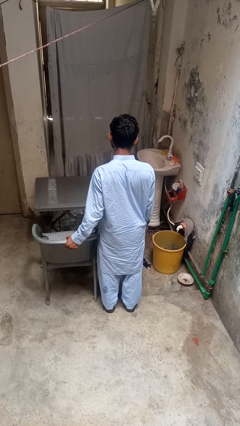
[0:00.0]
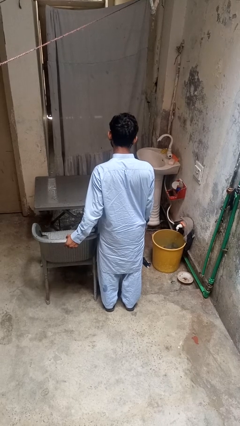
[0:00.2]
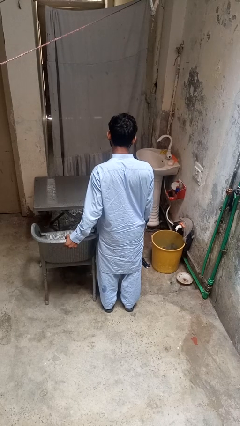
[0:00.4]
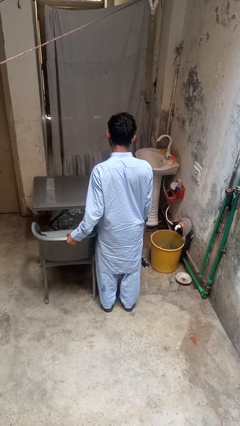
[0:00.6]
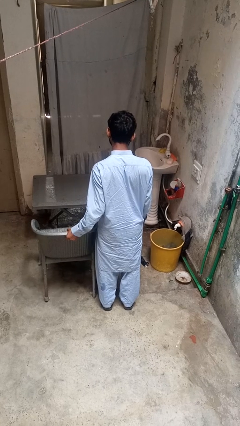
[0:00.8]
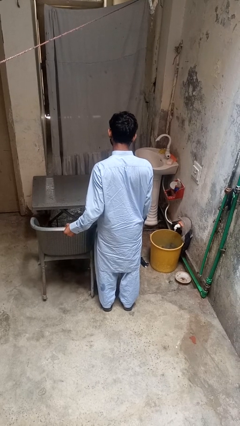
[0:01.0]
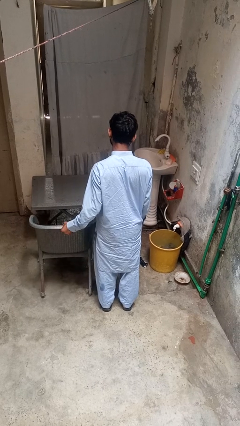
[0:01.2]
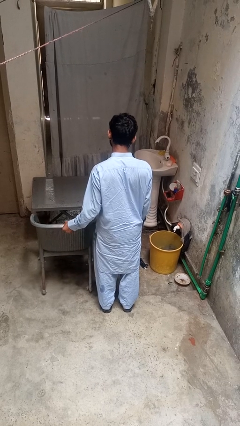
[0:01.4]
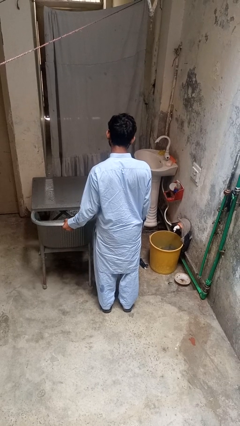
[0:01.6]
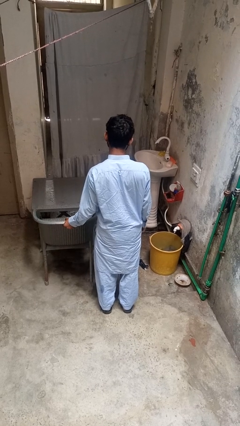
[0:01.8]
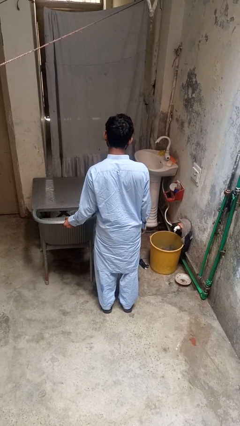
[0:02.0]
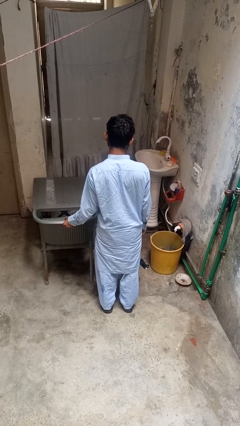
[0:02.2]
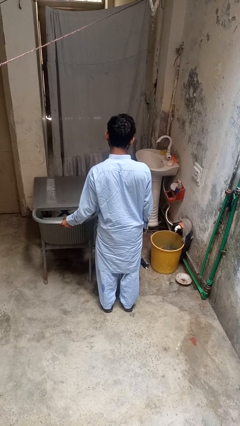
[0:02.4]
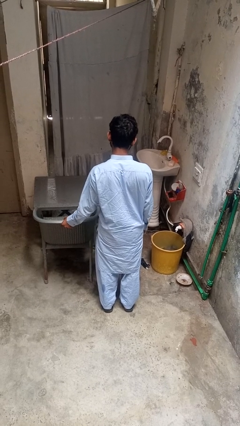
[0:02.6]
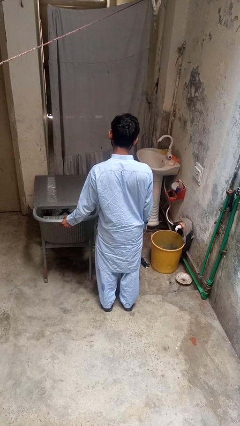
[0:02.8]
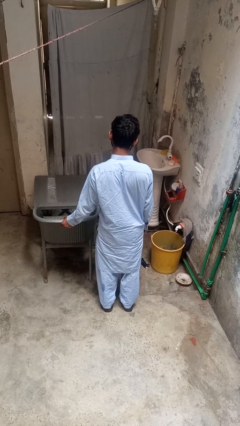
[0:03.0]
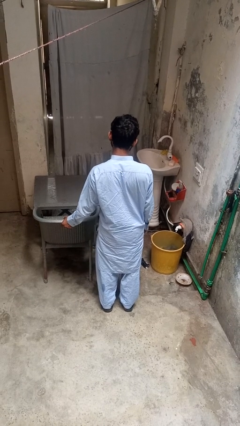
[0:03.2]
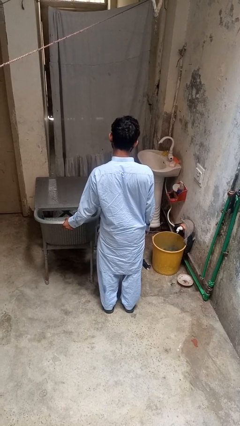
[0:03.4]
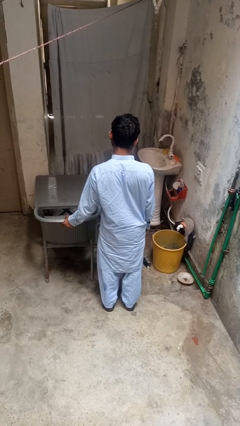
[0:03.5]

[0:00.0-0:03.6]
person pushes in chair

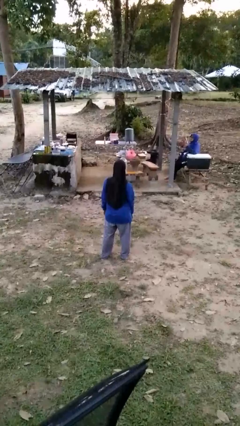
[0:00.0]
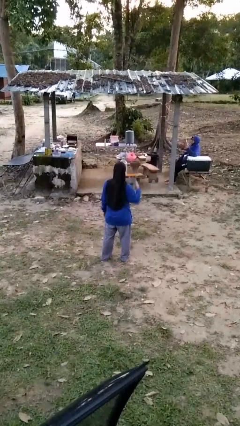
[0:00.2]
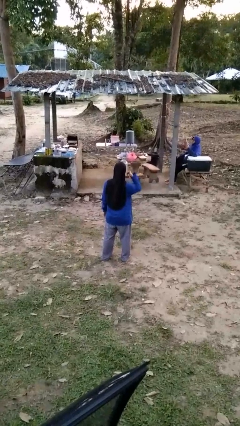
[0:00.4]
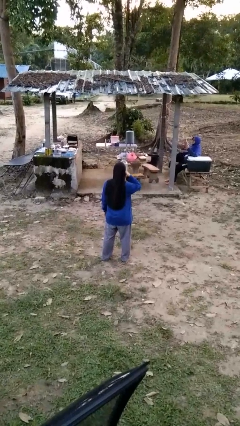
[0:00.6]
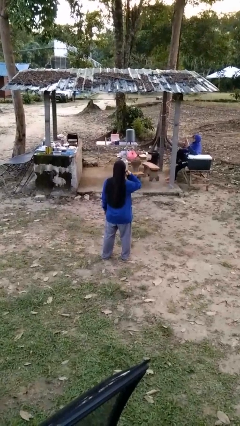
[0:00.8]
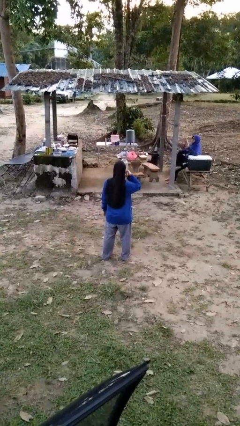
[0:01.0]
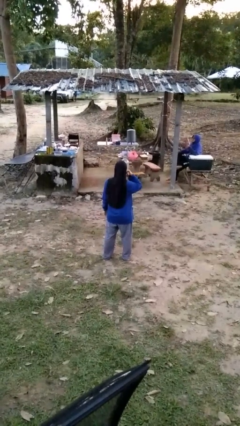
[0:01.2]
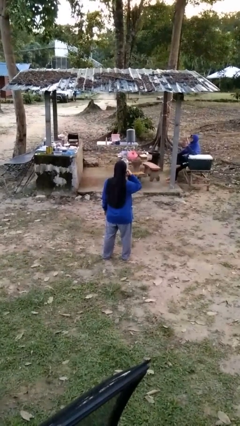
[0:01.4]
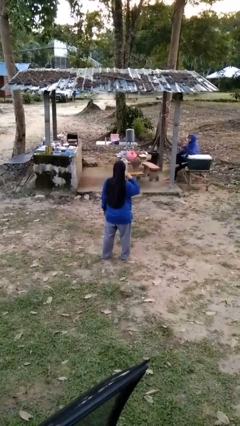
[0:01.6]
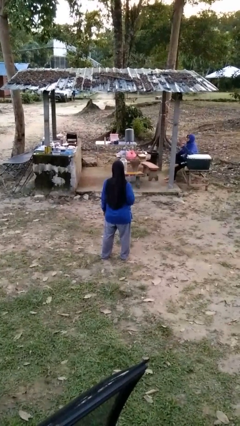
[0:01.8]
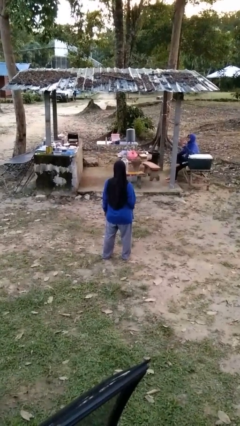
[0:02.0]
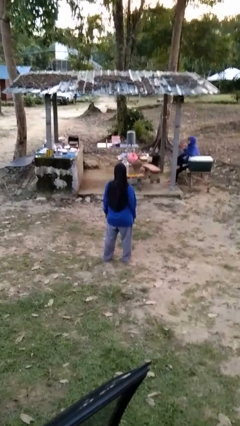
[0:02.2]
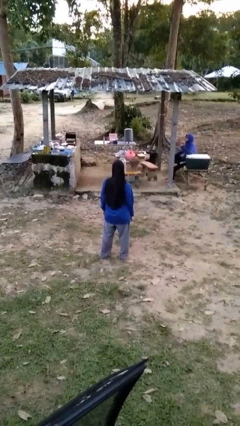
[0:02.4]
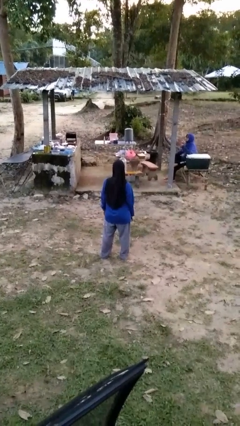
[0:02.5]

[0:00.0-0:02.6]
person gestures call me

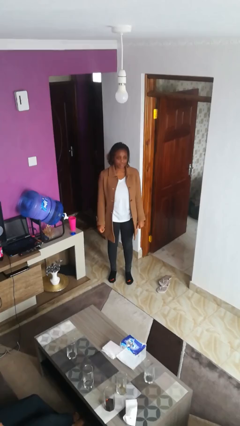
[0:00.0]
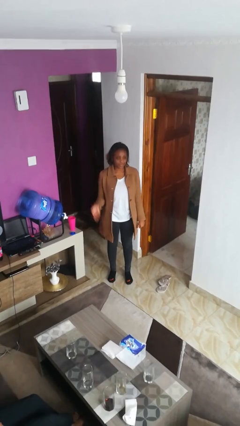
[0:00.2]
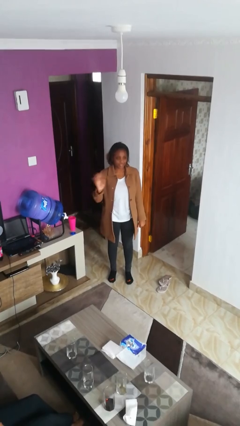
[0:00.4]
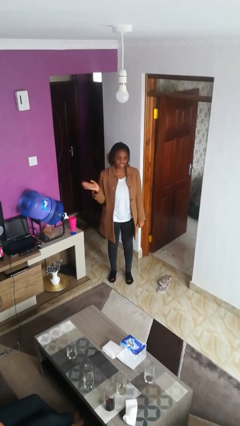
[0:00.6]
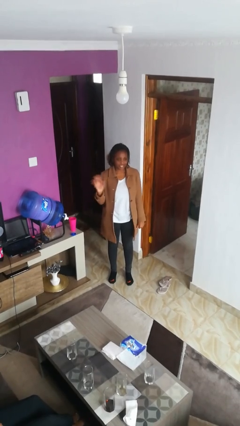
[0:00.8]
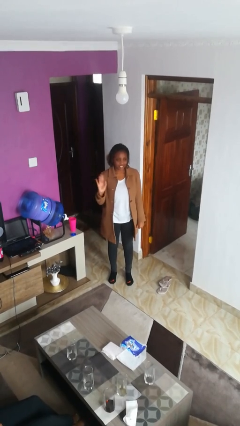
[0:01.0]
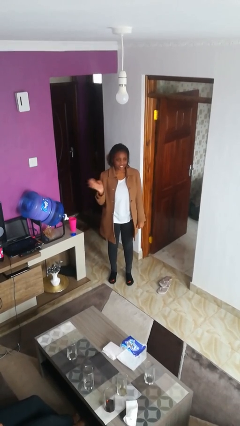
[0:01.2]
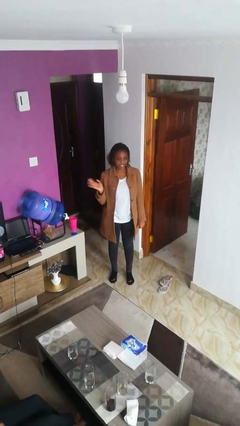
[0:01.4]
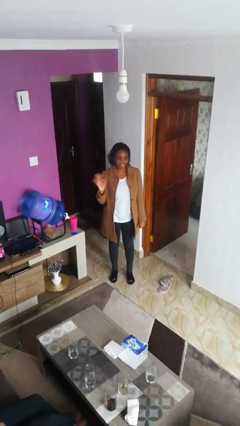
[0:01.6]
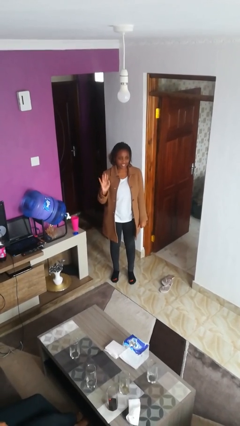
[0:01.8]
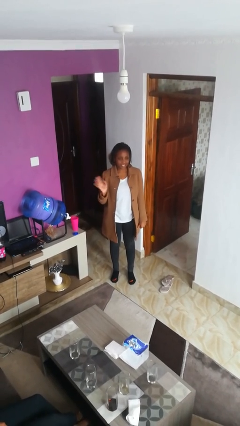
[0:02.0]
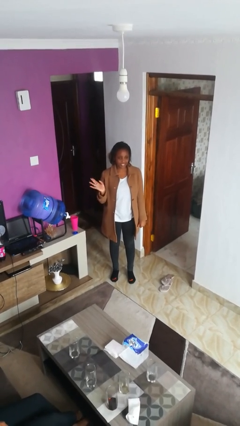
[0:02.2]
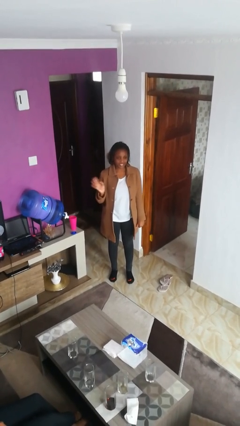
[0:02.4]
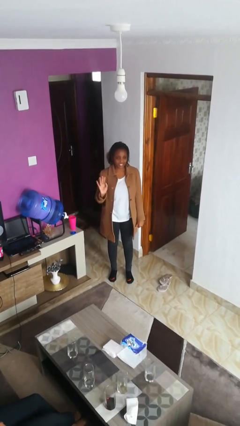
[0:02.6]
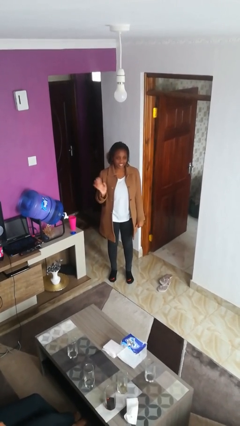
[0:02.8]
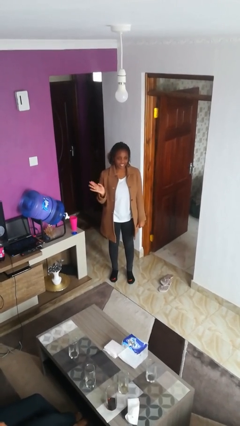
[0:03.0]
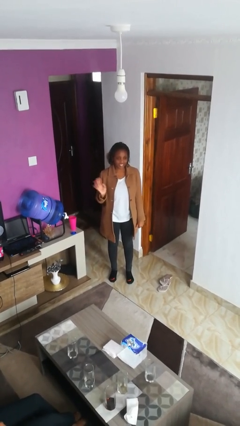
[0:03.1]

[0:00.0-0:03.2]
person waves at person

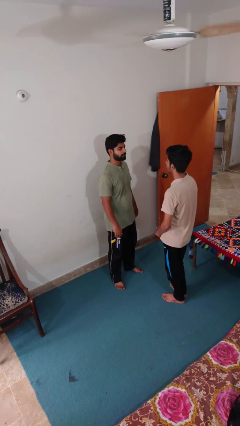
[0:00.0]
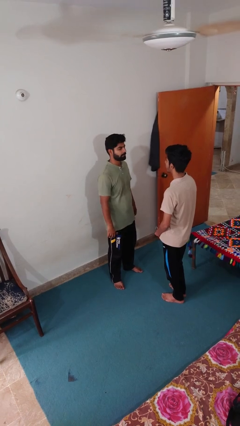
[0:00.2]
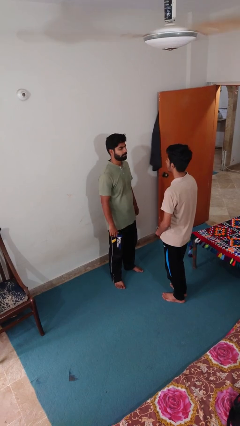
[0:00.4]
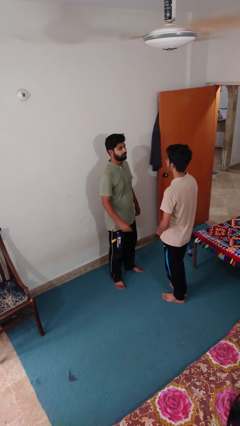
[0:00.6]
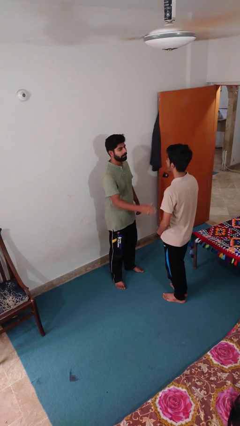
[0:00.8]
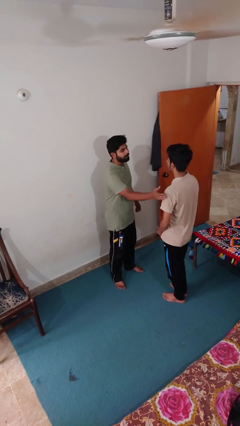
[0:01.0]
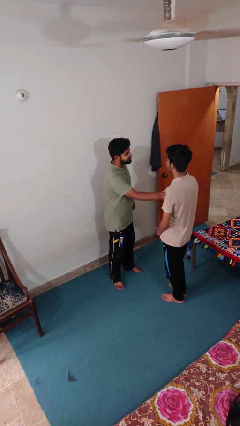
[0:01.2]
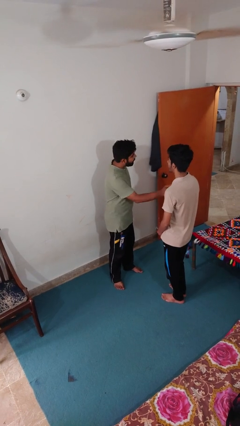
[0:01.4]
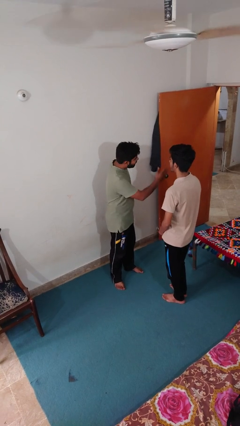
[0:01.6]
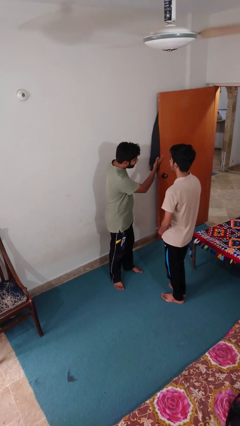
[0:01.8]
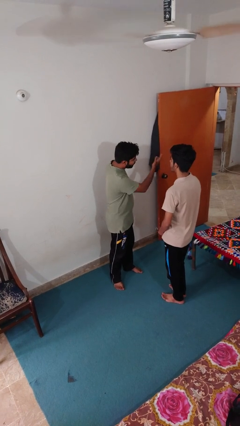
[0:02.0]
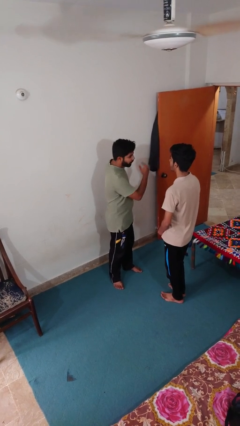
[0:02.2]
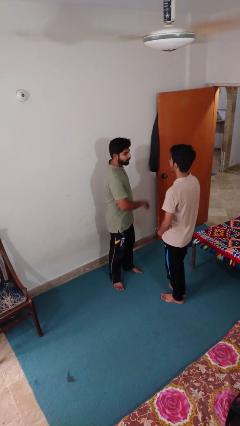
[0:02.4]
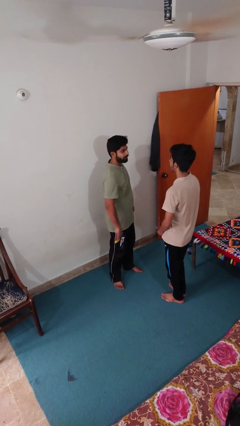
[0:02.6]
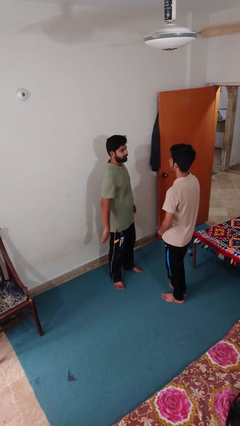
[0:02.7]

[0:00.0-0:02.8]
person shoves person

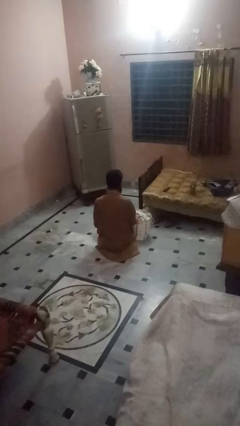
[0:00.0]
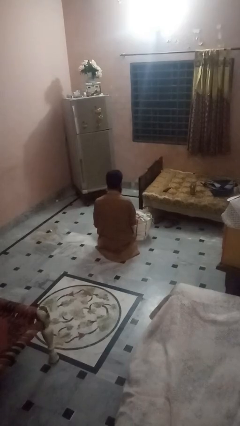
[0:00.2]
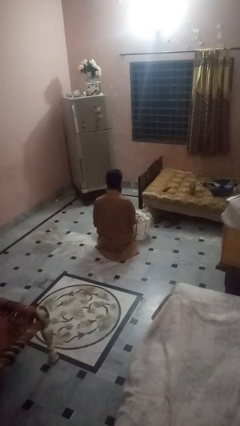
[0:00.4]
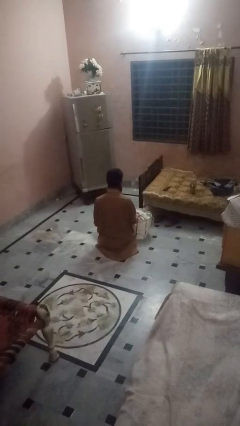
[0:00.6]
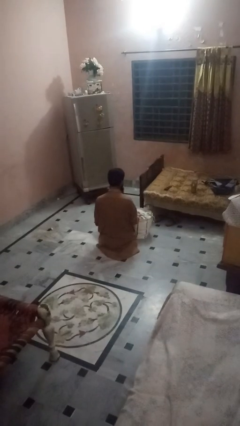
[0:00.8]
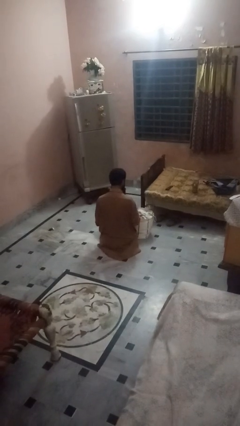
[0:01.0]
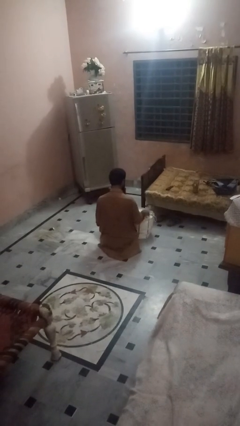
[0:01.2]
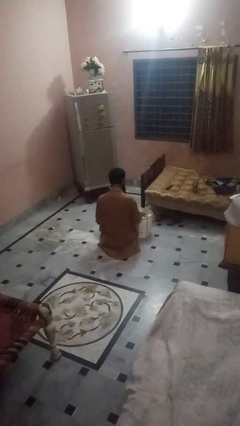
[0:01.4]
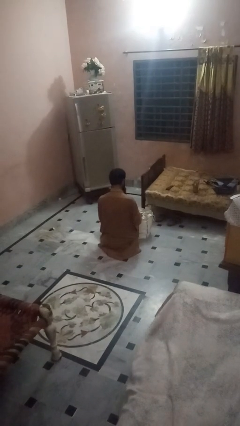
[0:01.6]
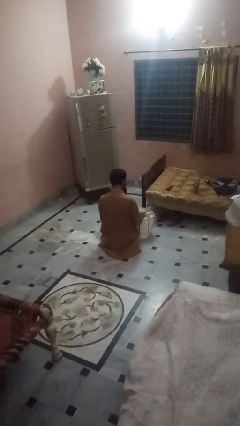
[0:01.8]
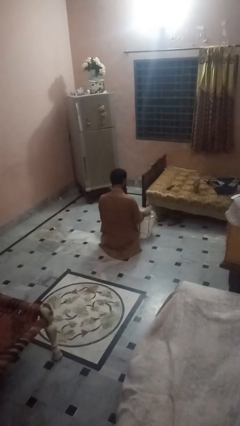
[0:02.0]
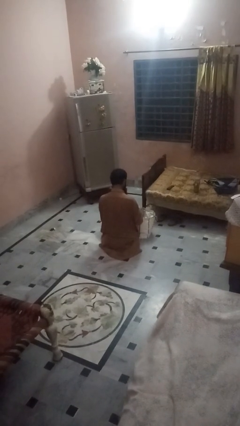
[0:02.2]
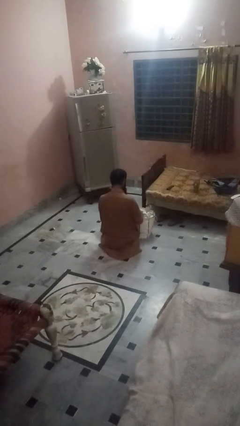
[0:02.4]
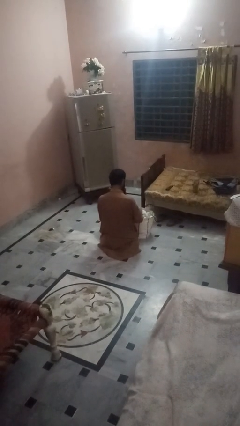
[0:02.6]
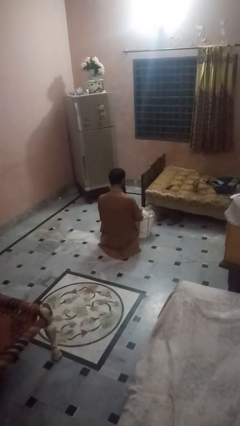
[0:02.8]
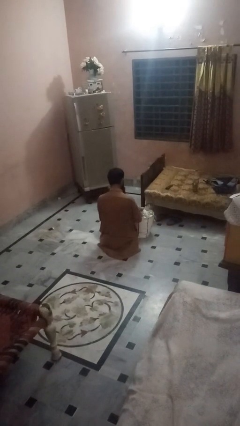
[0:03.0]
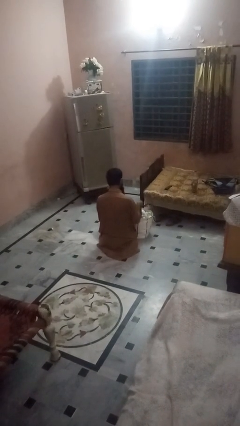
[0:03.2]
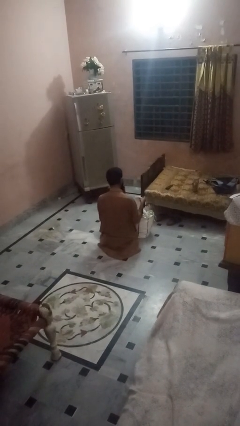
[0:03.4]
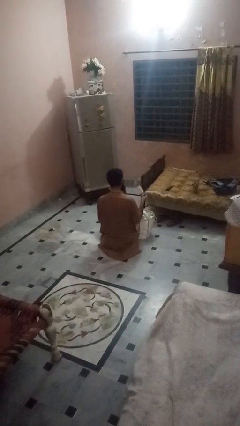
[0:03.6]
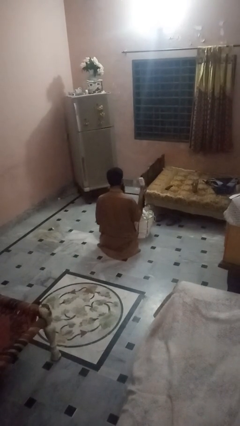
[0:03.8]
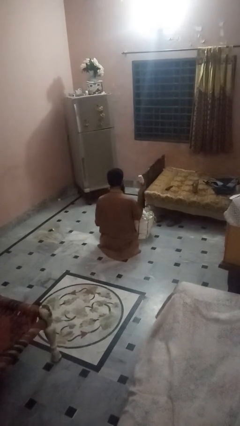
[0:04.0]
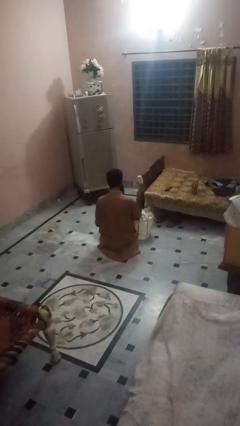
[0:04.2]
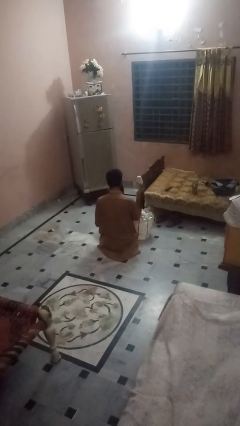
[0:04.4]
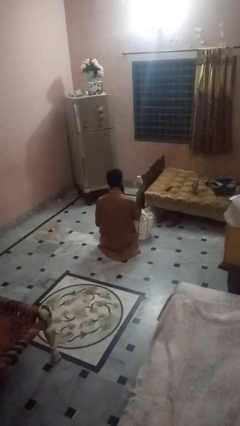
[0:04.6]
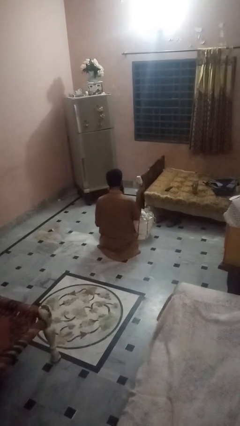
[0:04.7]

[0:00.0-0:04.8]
person takes object from bag

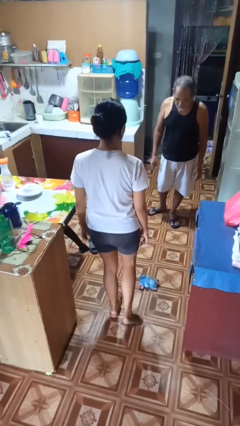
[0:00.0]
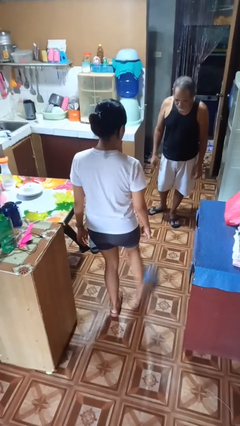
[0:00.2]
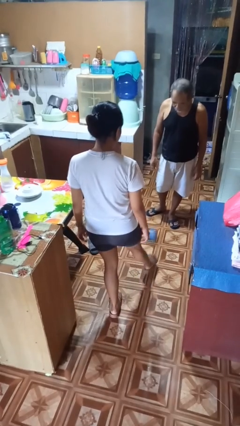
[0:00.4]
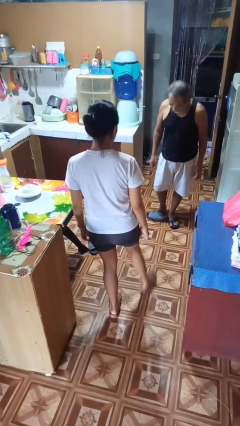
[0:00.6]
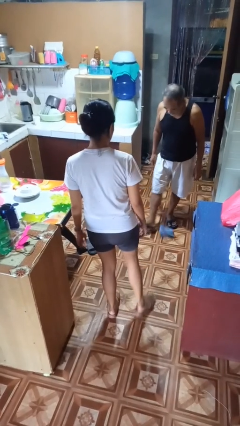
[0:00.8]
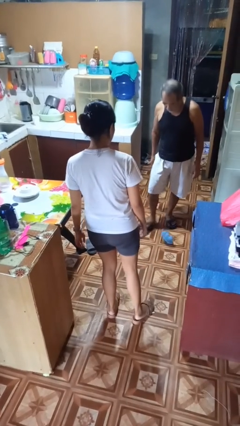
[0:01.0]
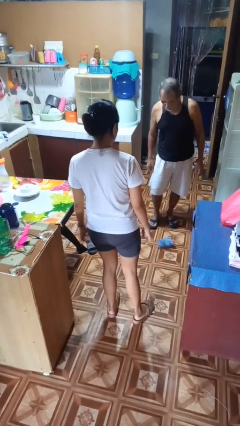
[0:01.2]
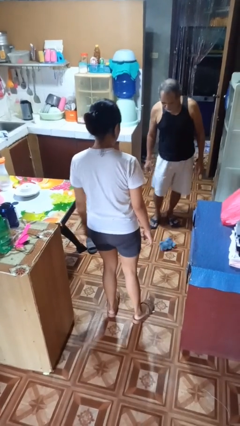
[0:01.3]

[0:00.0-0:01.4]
person kicks object to person
